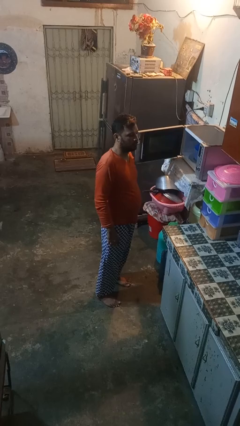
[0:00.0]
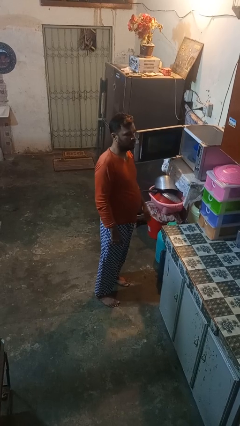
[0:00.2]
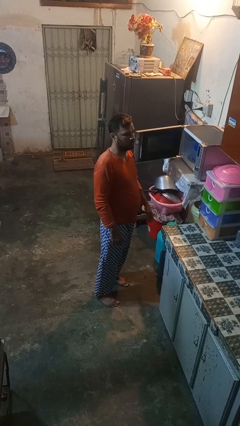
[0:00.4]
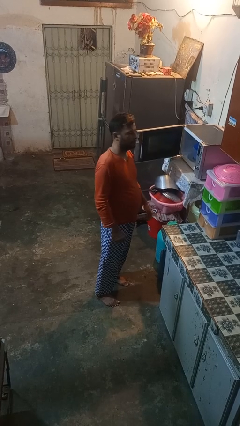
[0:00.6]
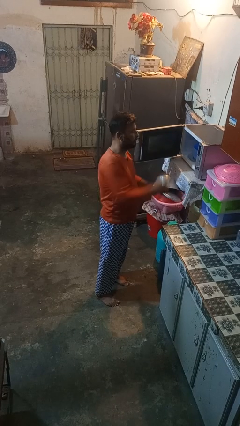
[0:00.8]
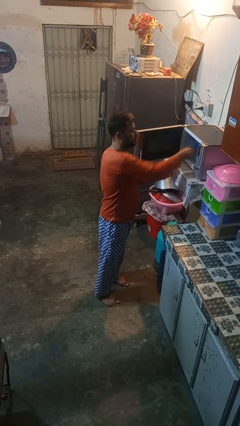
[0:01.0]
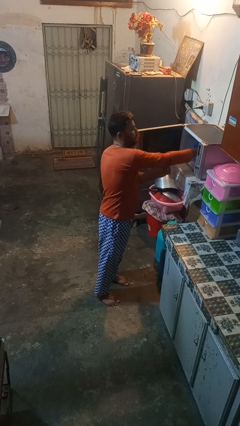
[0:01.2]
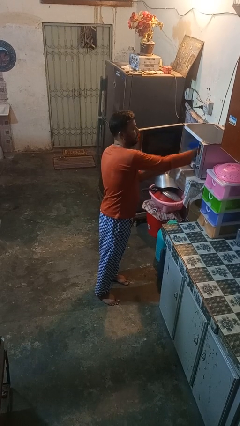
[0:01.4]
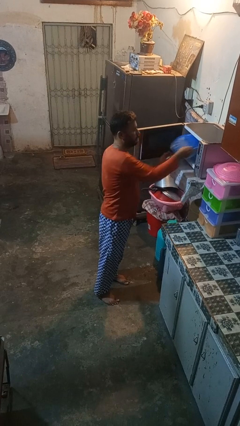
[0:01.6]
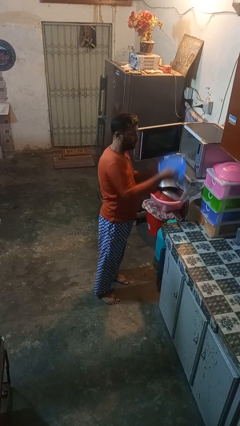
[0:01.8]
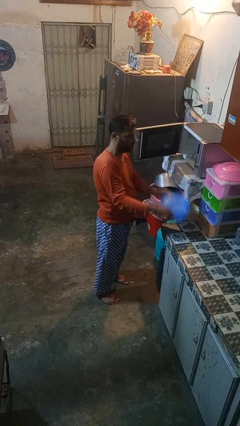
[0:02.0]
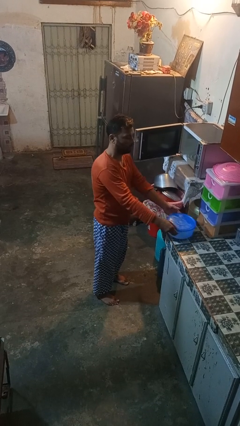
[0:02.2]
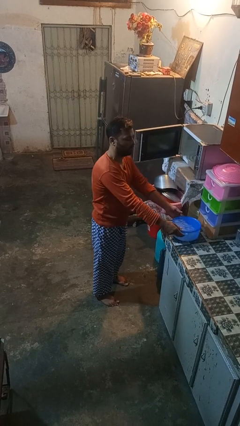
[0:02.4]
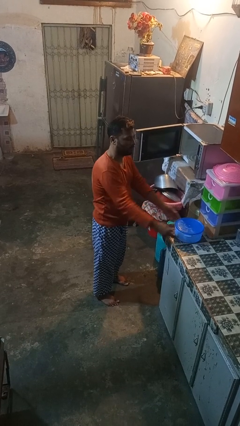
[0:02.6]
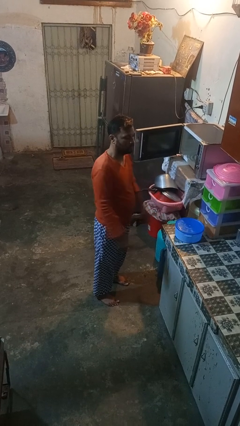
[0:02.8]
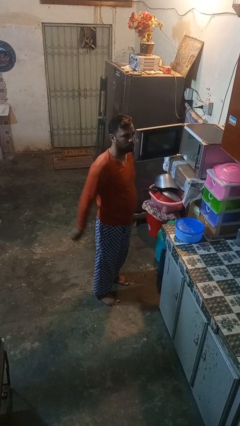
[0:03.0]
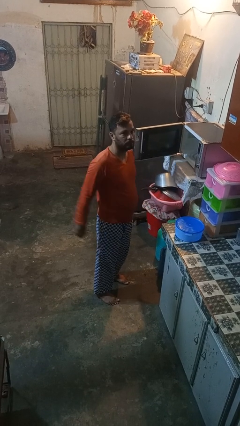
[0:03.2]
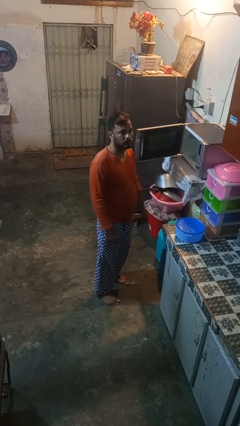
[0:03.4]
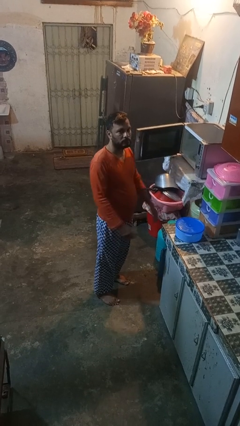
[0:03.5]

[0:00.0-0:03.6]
person takes object from microwave

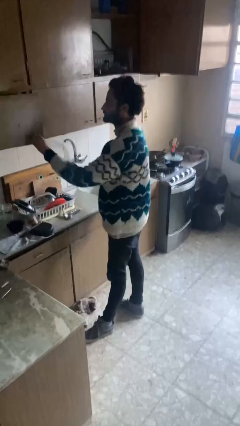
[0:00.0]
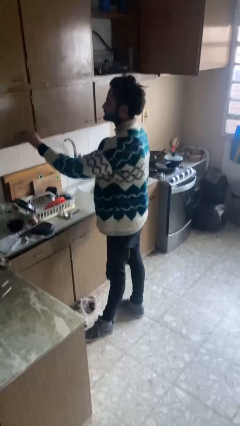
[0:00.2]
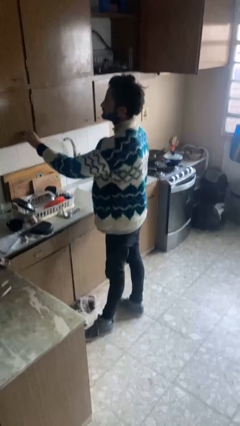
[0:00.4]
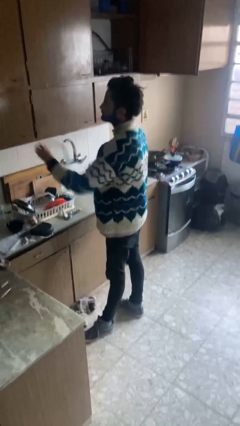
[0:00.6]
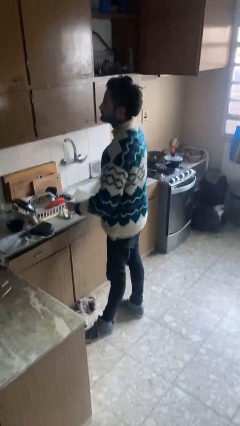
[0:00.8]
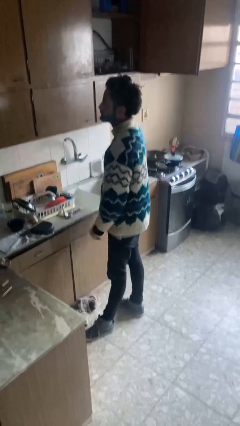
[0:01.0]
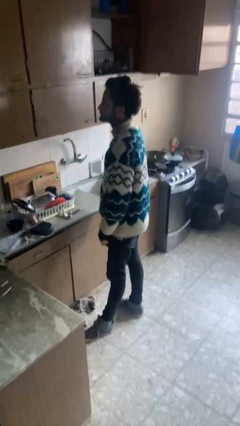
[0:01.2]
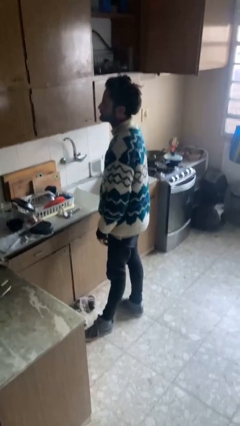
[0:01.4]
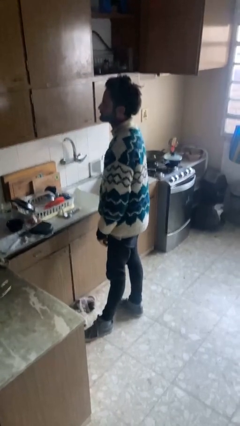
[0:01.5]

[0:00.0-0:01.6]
person closes cabinet

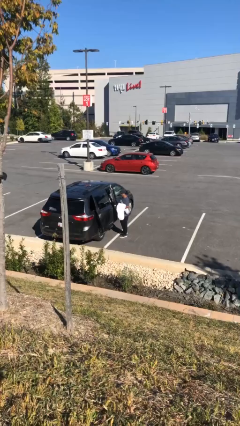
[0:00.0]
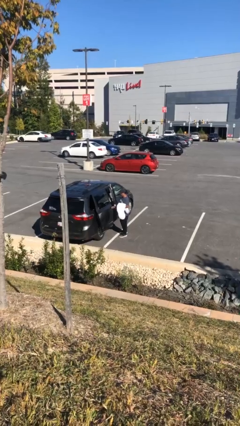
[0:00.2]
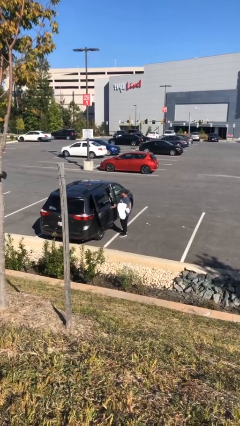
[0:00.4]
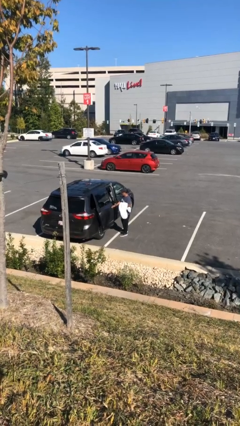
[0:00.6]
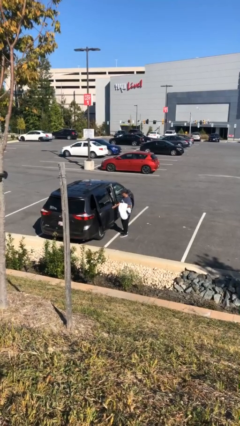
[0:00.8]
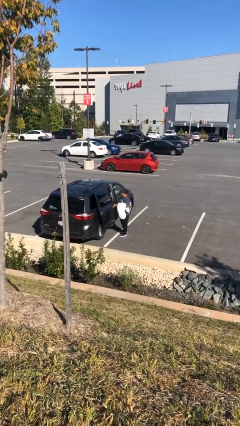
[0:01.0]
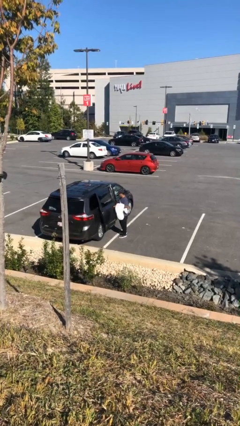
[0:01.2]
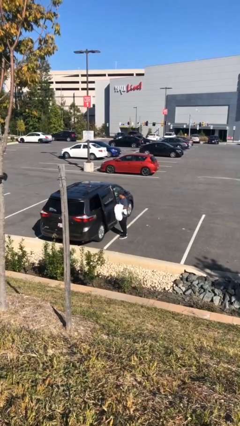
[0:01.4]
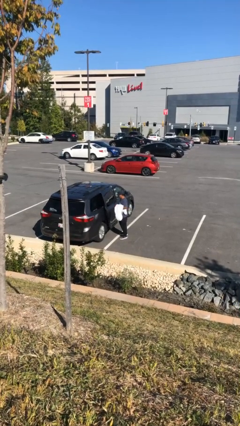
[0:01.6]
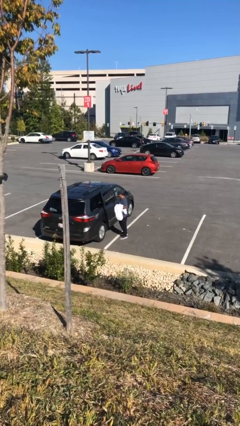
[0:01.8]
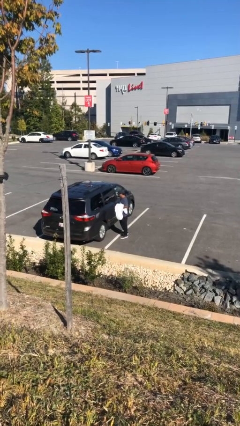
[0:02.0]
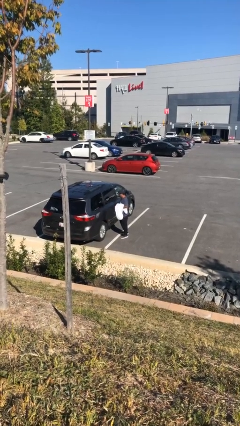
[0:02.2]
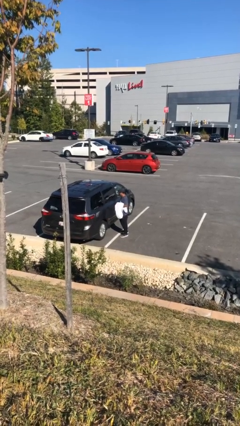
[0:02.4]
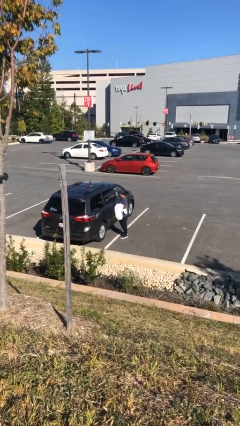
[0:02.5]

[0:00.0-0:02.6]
person closes car door

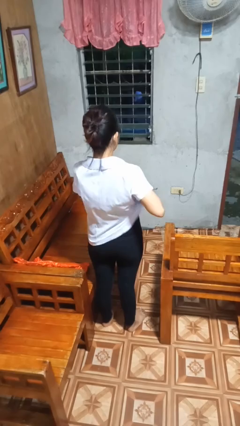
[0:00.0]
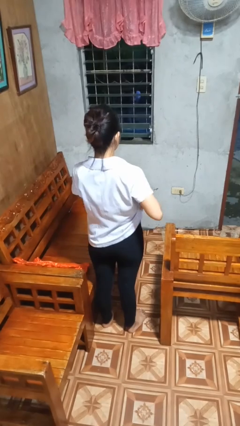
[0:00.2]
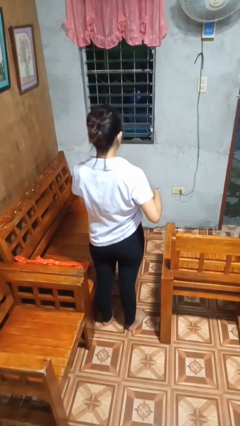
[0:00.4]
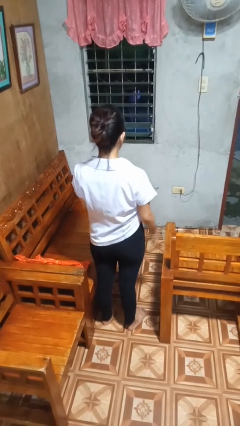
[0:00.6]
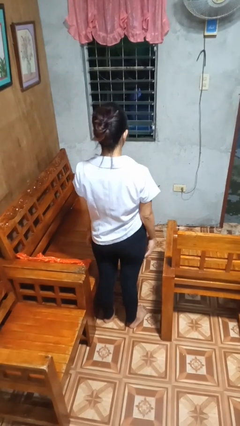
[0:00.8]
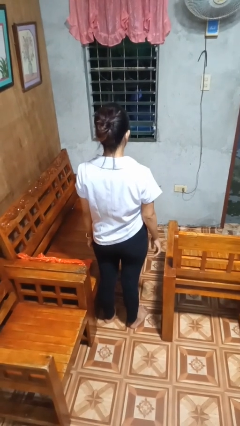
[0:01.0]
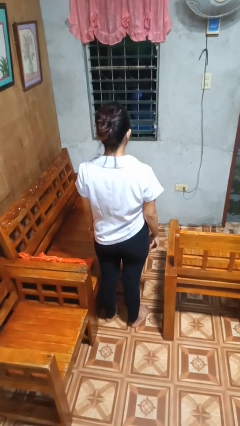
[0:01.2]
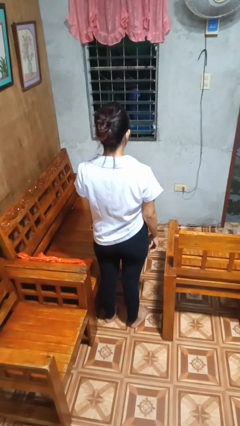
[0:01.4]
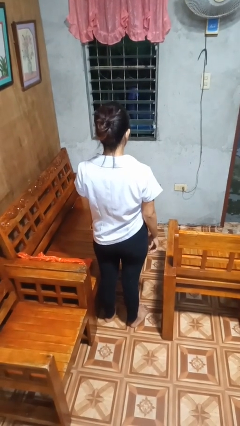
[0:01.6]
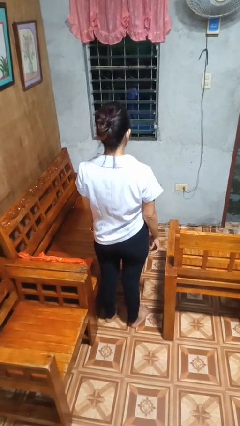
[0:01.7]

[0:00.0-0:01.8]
person puts phone into pocket

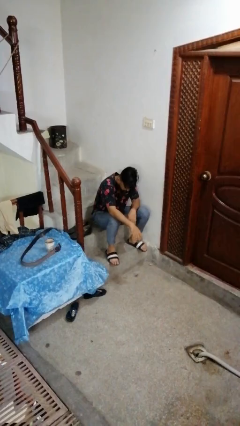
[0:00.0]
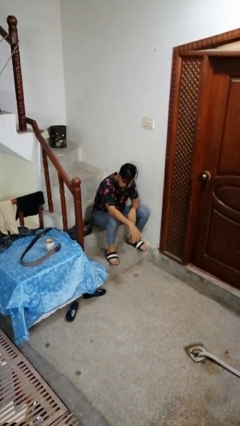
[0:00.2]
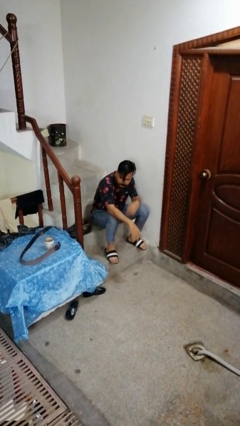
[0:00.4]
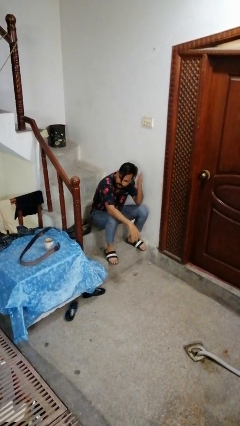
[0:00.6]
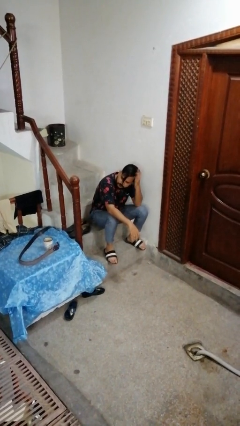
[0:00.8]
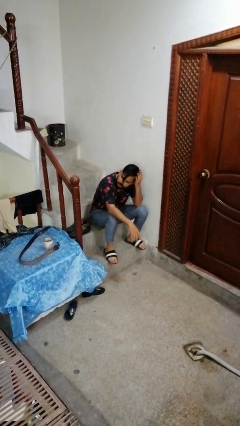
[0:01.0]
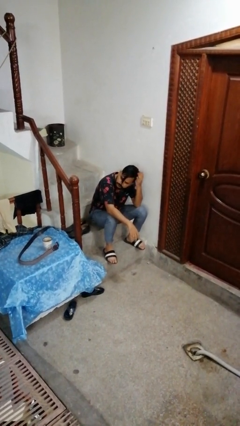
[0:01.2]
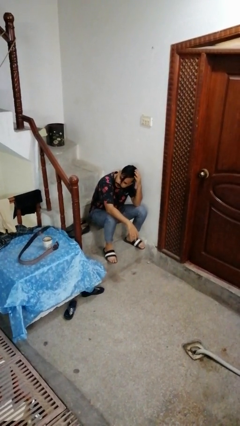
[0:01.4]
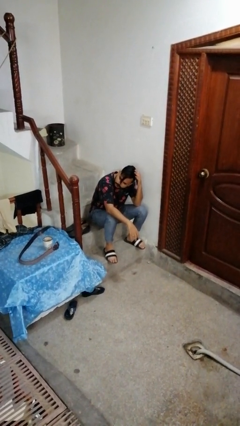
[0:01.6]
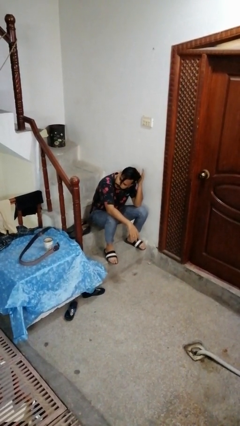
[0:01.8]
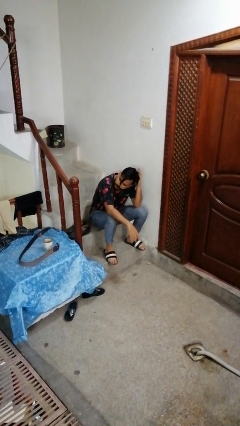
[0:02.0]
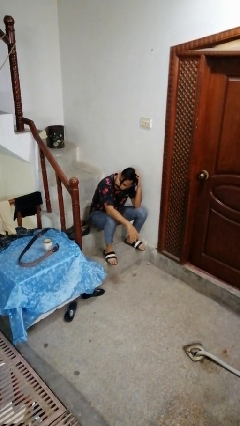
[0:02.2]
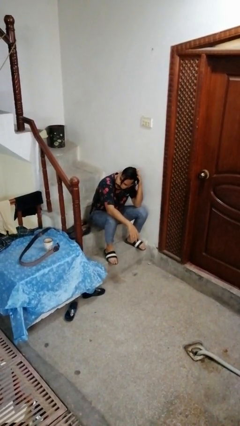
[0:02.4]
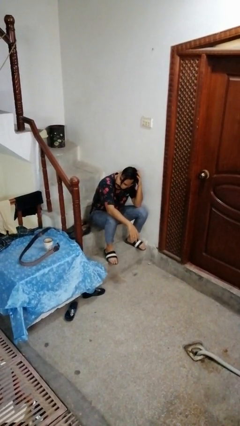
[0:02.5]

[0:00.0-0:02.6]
person strokes hair

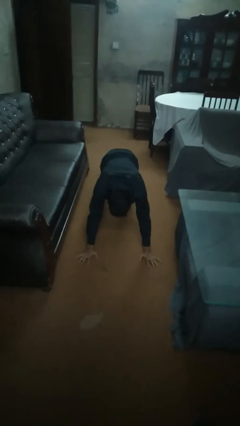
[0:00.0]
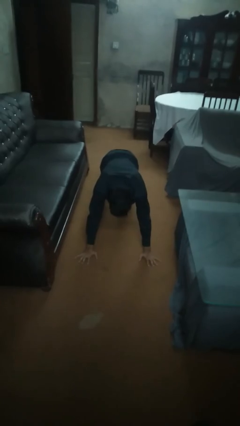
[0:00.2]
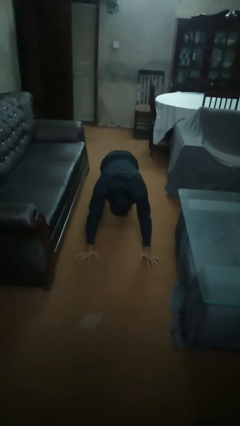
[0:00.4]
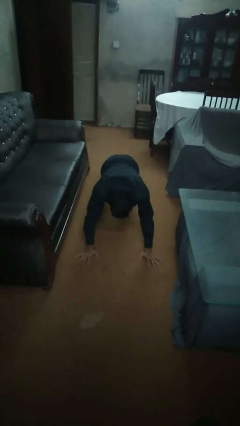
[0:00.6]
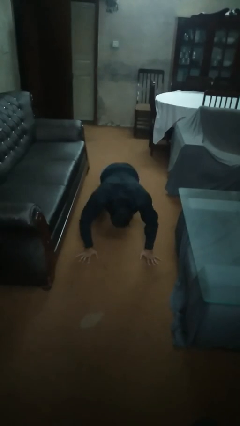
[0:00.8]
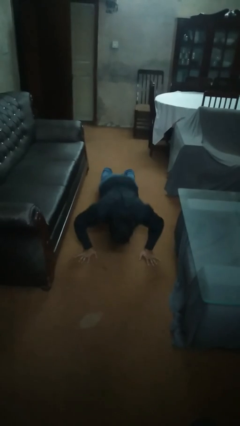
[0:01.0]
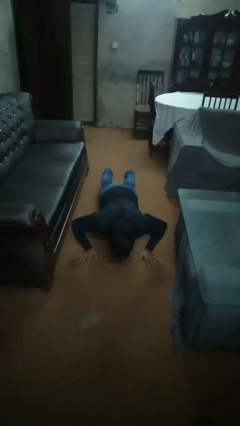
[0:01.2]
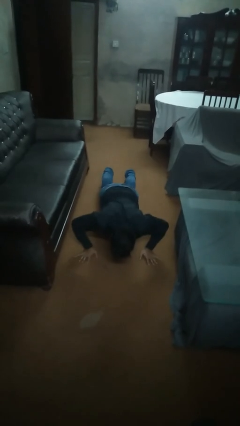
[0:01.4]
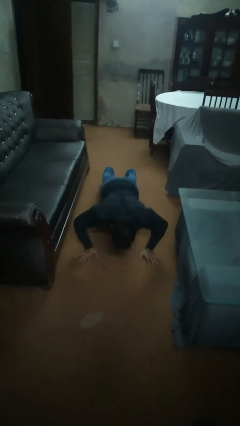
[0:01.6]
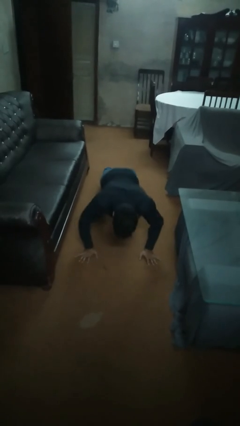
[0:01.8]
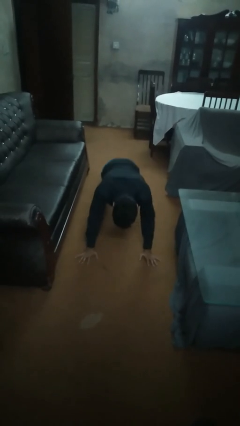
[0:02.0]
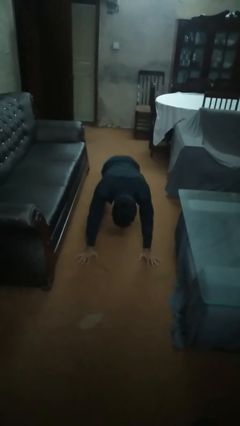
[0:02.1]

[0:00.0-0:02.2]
person exercises with pushup

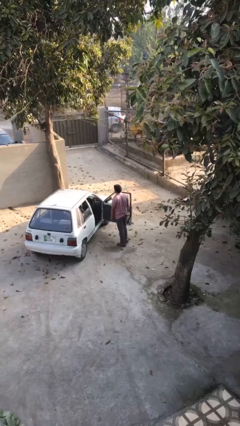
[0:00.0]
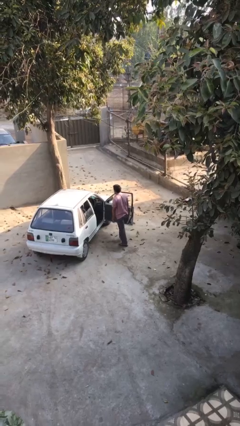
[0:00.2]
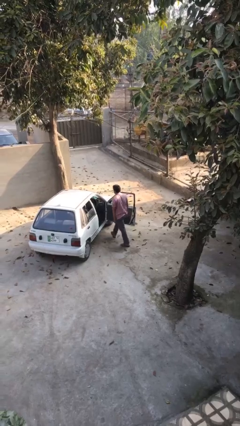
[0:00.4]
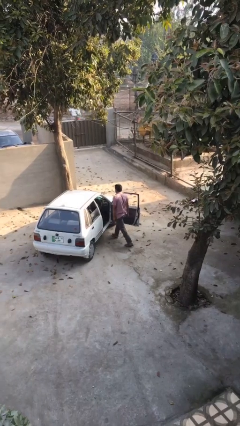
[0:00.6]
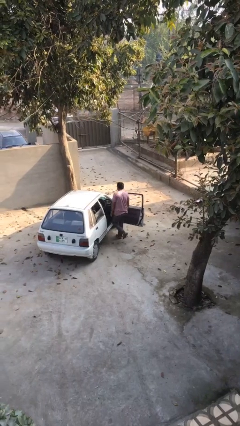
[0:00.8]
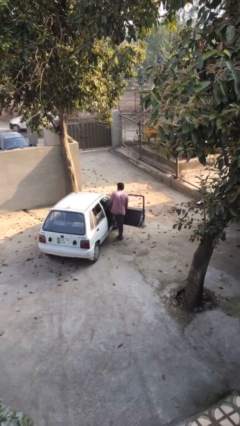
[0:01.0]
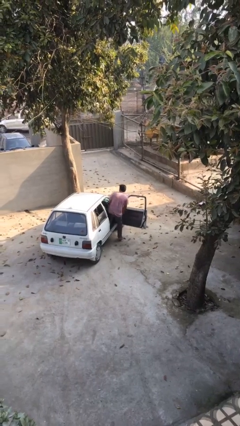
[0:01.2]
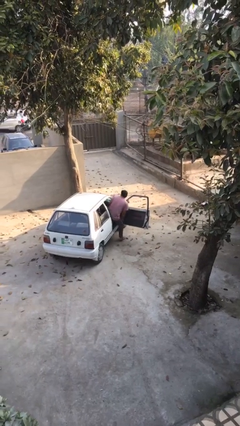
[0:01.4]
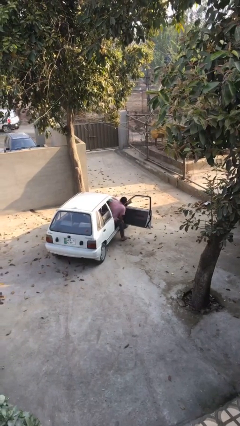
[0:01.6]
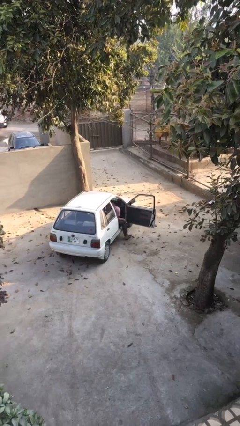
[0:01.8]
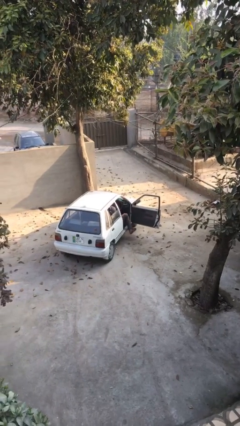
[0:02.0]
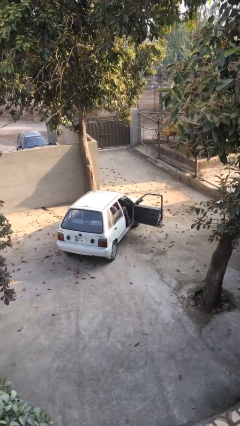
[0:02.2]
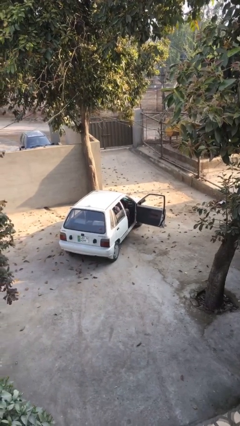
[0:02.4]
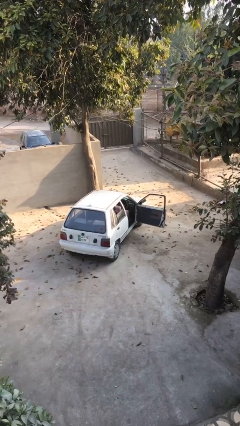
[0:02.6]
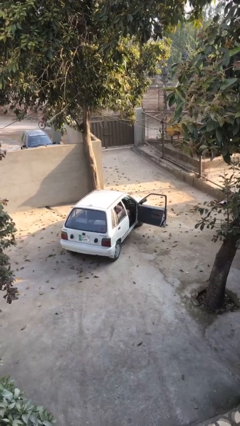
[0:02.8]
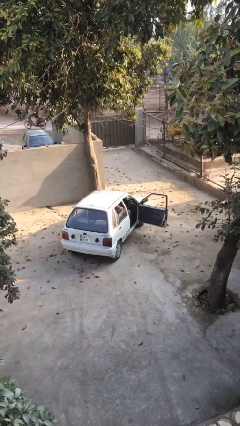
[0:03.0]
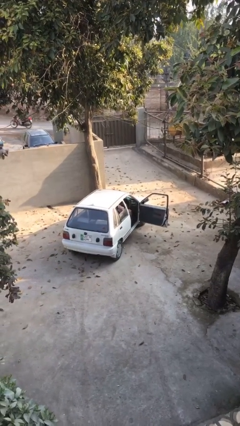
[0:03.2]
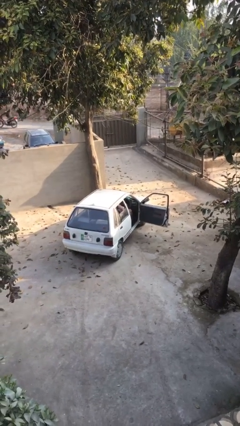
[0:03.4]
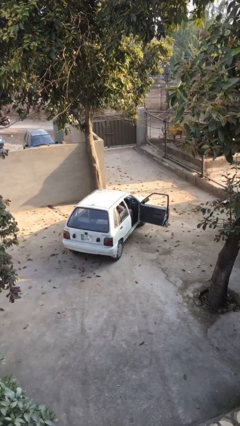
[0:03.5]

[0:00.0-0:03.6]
person enters car
